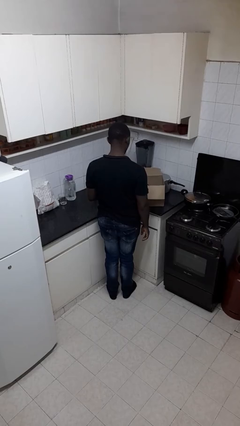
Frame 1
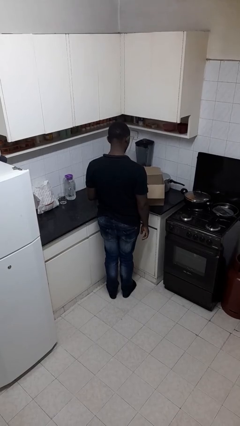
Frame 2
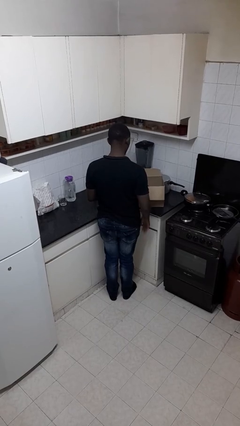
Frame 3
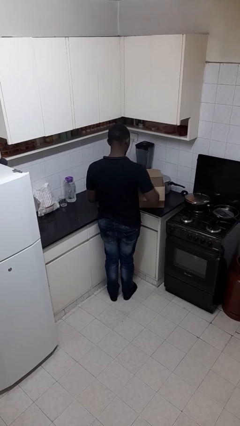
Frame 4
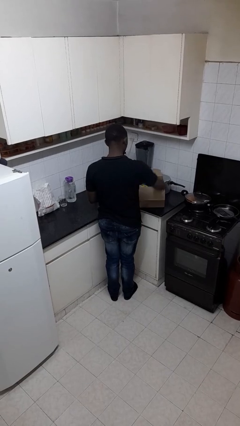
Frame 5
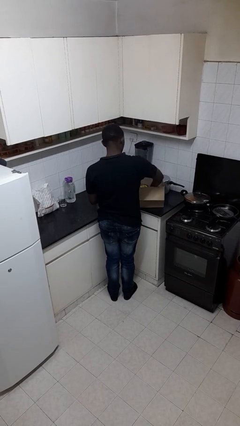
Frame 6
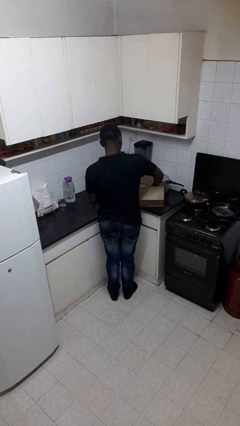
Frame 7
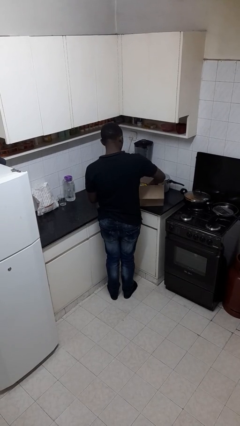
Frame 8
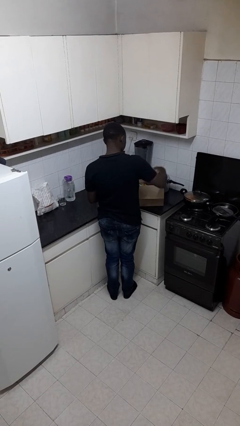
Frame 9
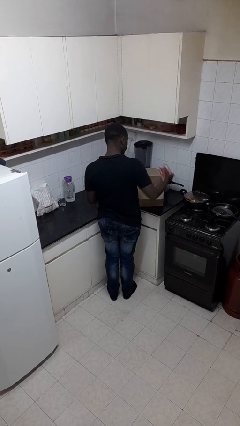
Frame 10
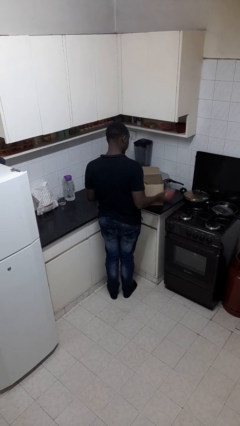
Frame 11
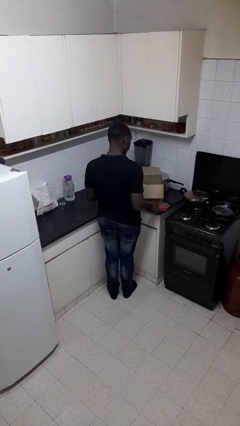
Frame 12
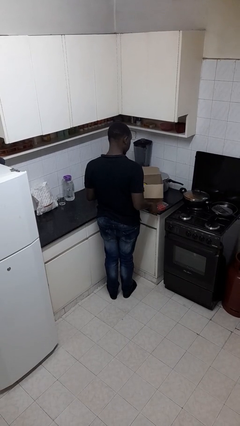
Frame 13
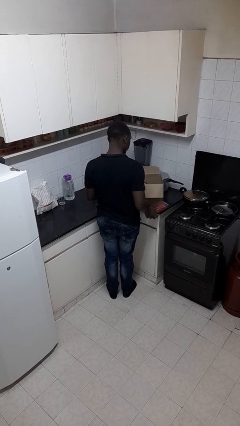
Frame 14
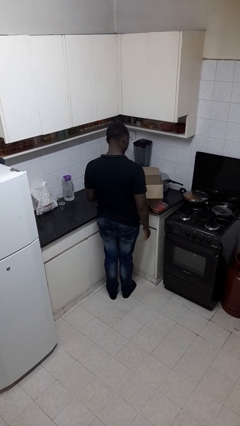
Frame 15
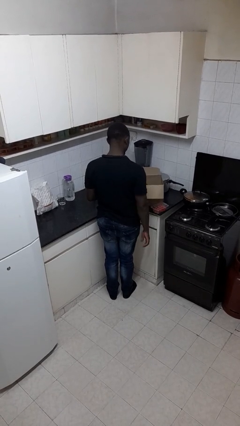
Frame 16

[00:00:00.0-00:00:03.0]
person takes object from box

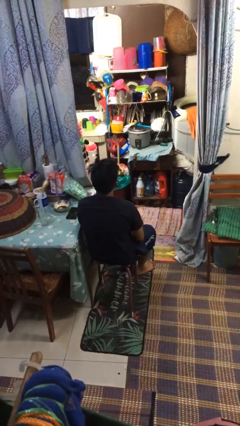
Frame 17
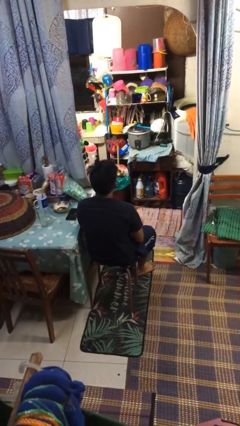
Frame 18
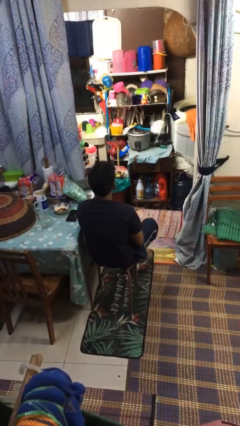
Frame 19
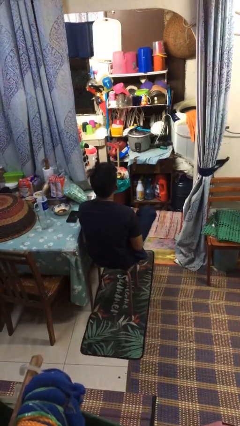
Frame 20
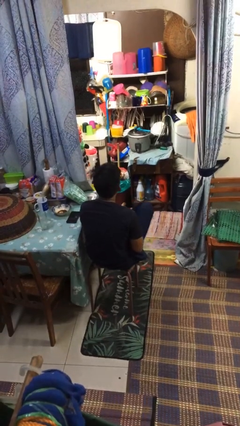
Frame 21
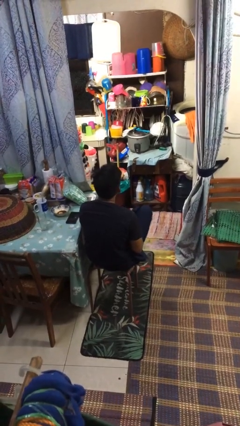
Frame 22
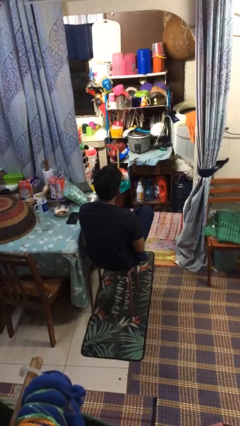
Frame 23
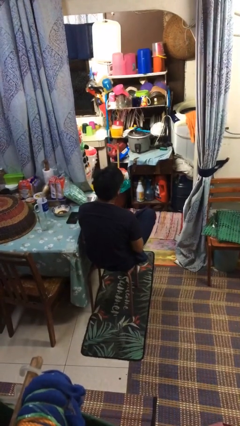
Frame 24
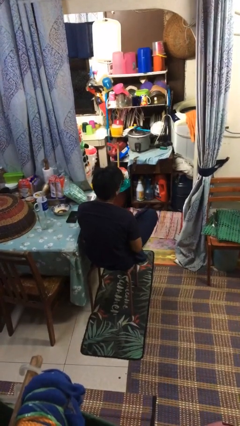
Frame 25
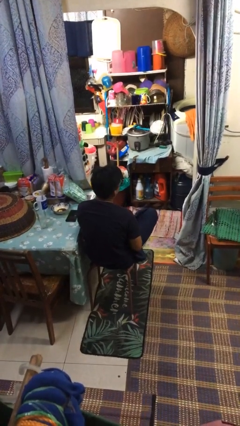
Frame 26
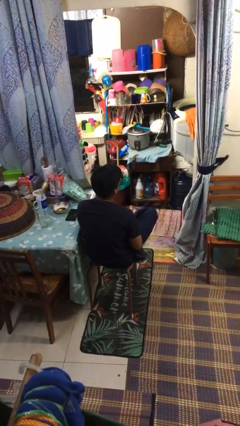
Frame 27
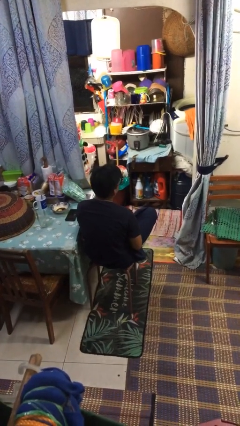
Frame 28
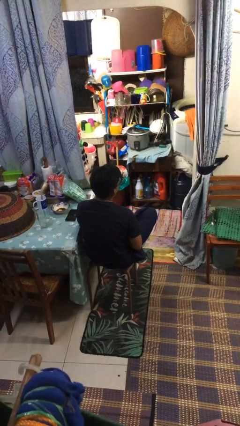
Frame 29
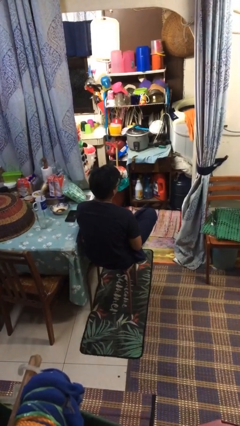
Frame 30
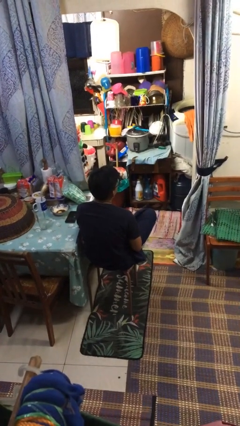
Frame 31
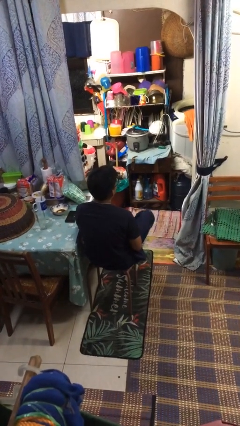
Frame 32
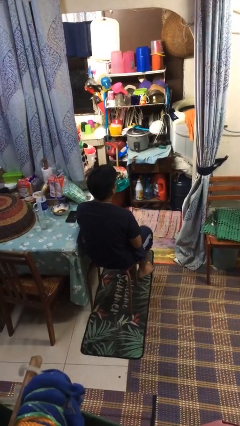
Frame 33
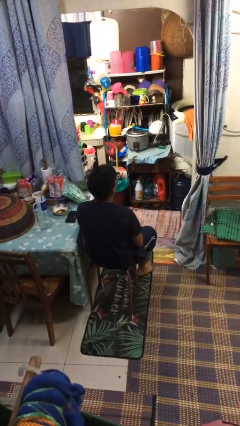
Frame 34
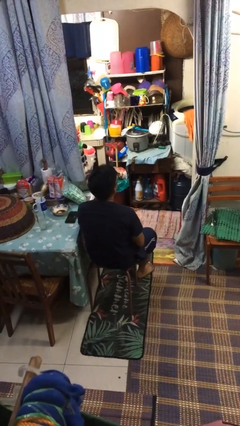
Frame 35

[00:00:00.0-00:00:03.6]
person crosses legs

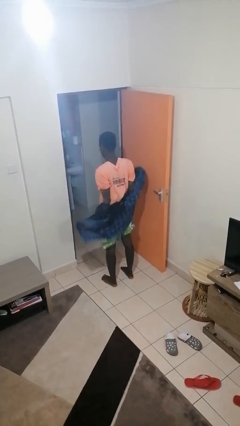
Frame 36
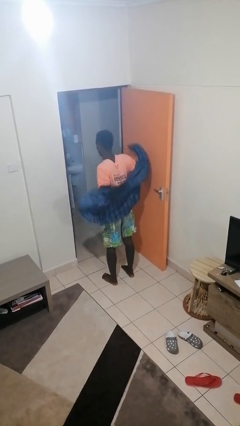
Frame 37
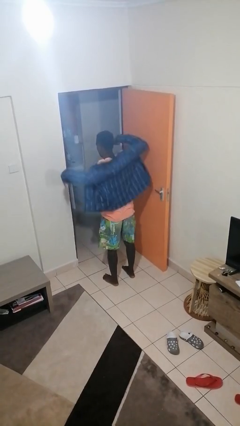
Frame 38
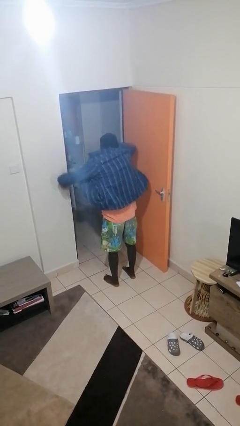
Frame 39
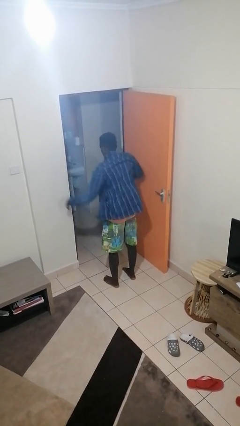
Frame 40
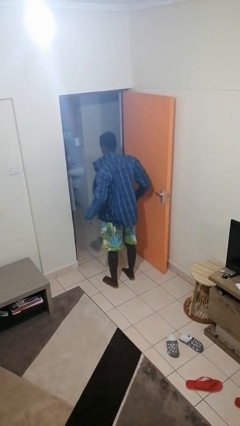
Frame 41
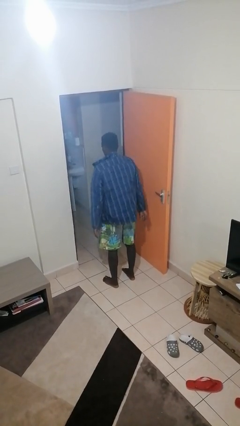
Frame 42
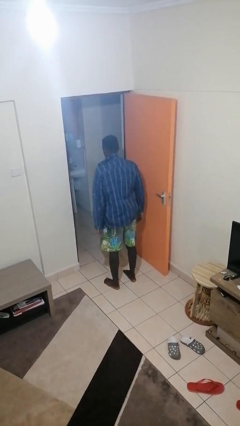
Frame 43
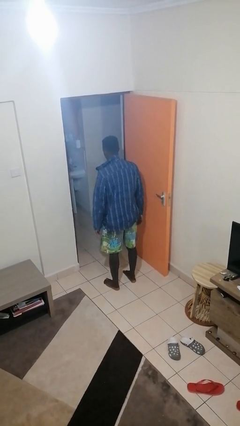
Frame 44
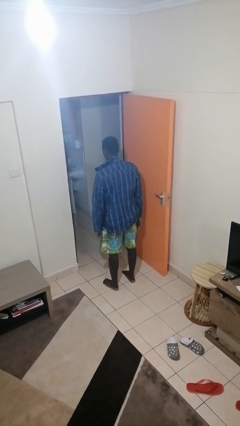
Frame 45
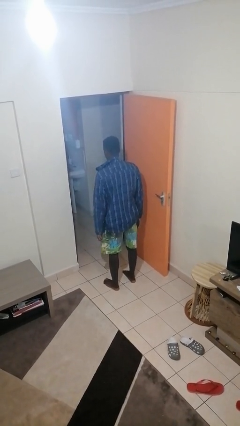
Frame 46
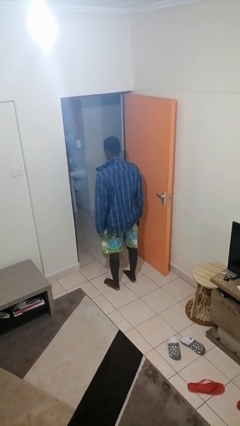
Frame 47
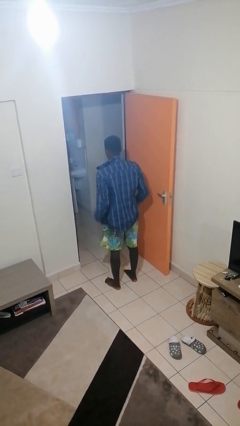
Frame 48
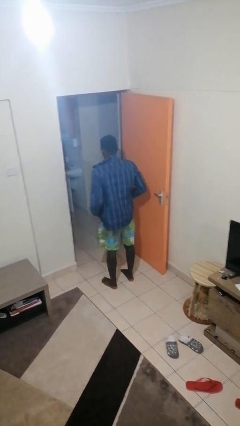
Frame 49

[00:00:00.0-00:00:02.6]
person puts on jacket

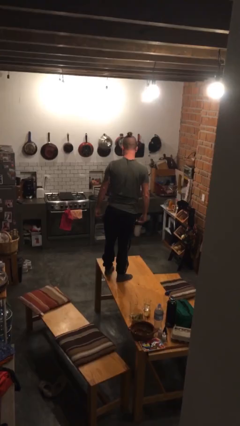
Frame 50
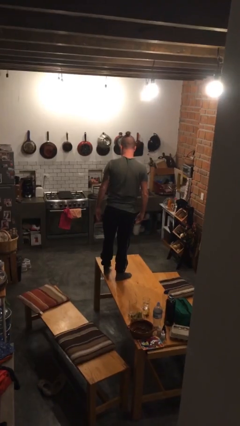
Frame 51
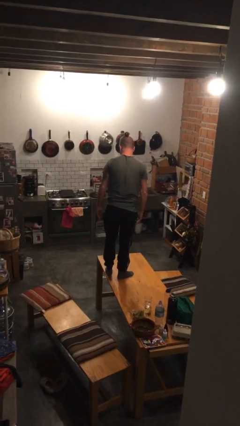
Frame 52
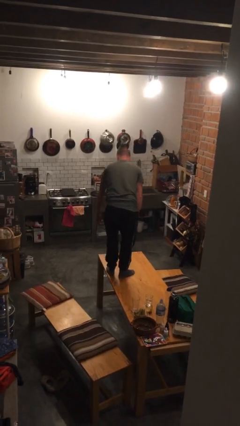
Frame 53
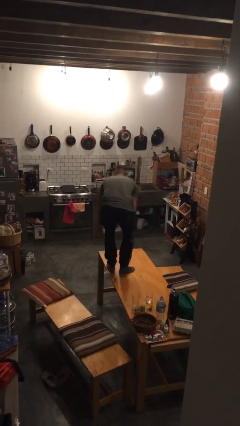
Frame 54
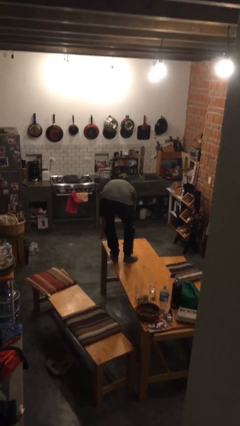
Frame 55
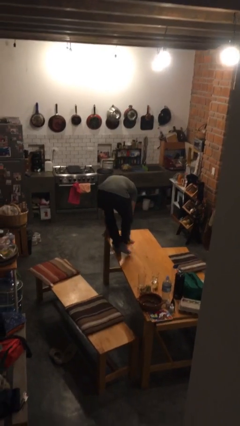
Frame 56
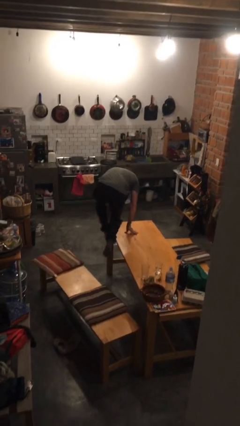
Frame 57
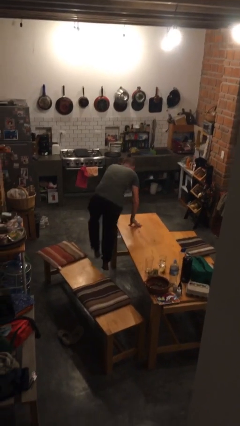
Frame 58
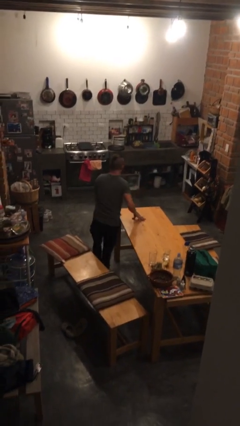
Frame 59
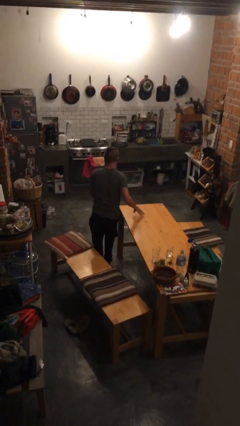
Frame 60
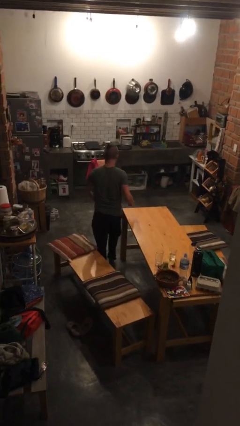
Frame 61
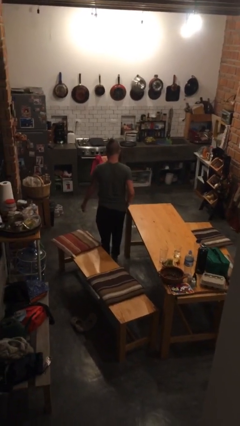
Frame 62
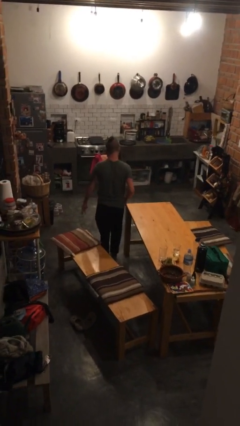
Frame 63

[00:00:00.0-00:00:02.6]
person climbs off table

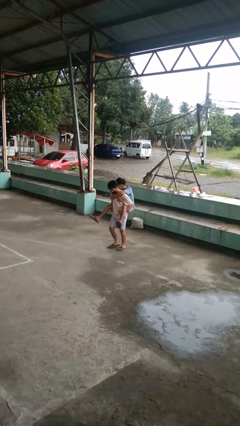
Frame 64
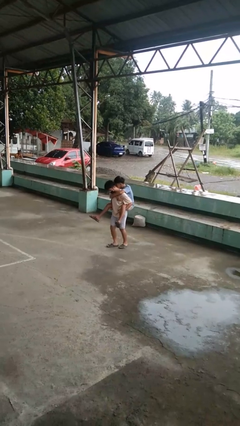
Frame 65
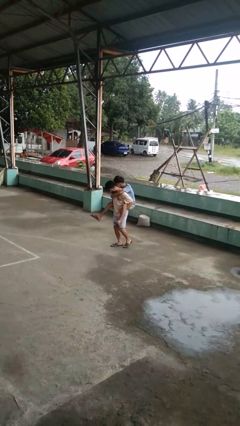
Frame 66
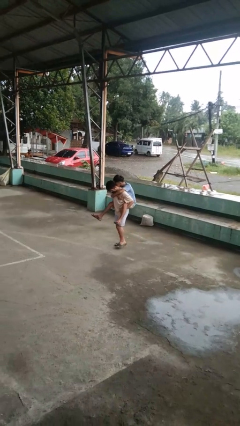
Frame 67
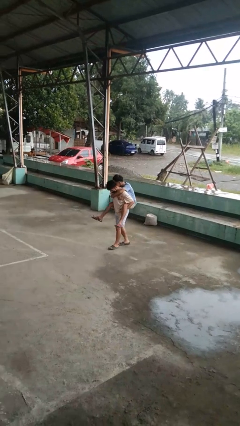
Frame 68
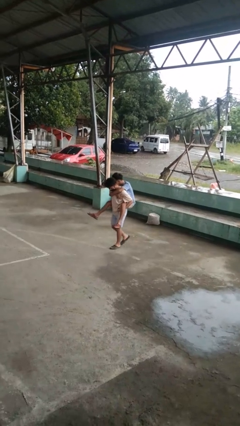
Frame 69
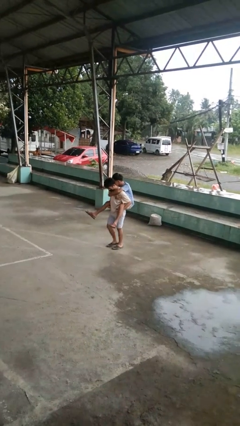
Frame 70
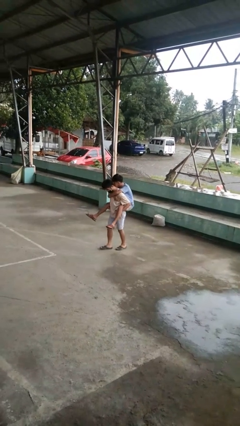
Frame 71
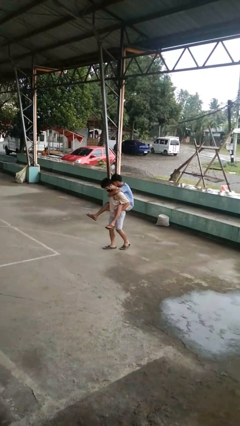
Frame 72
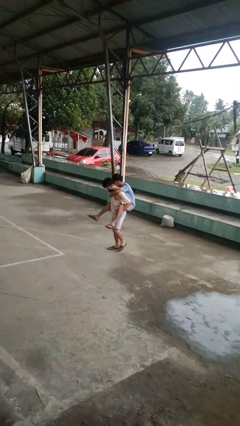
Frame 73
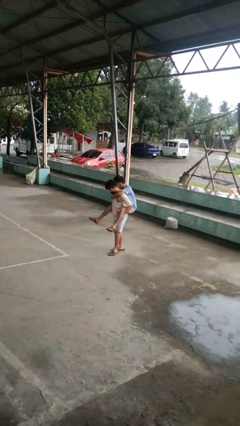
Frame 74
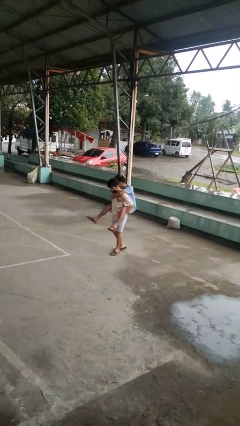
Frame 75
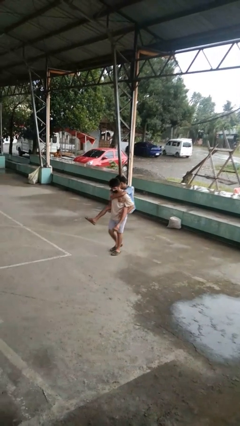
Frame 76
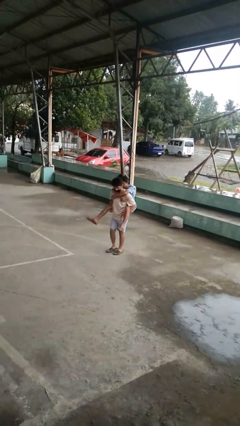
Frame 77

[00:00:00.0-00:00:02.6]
person carries person on back

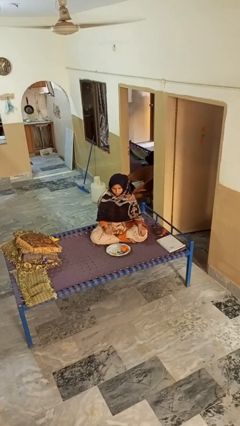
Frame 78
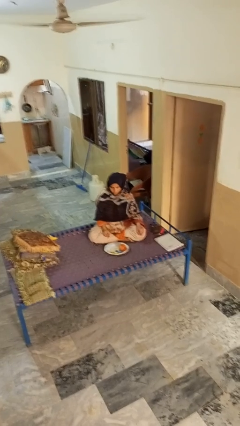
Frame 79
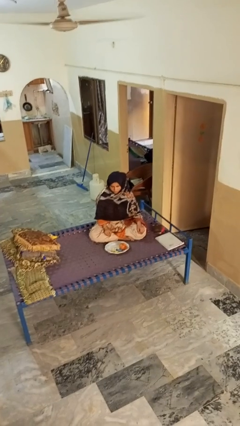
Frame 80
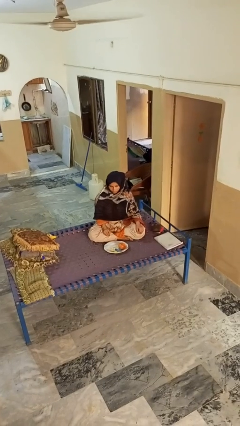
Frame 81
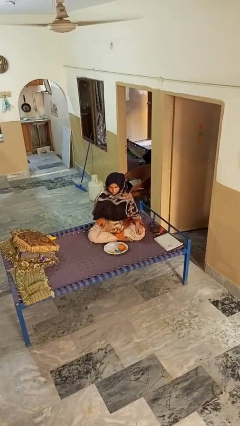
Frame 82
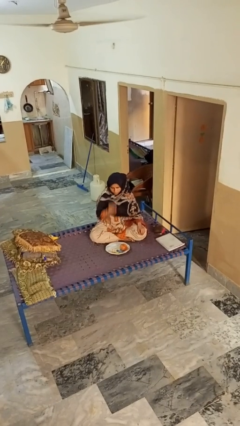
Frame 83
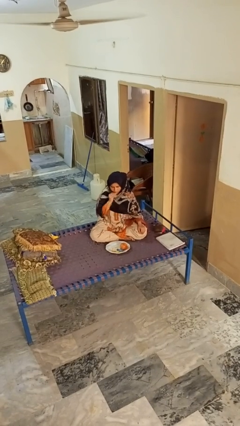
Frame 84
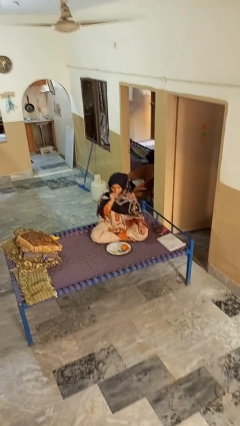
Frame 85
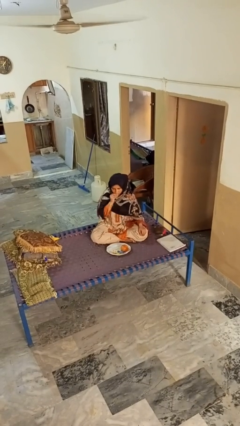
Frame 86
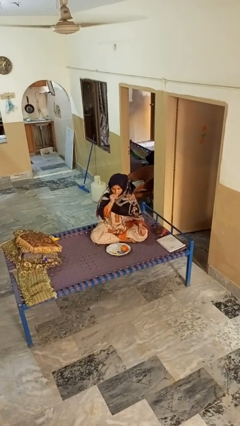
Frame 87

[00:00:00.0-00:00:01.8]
person eats apple

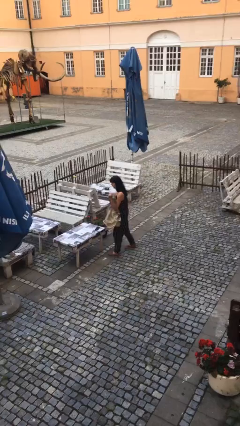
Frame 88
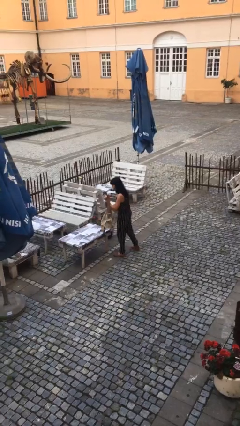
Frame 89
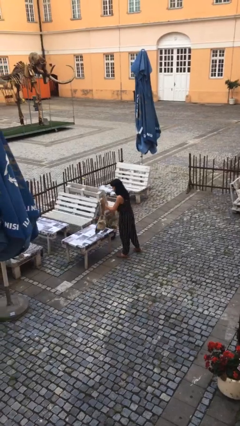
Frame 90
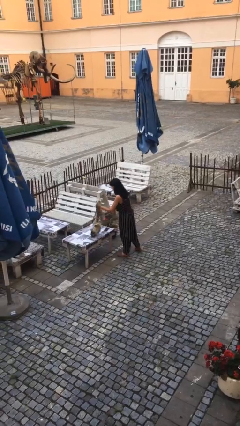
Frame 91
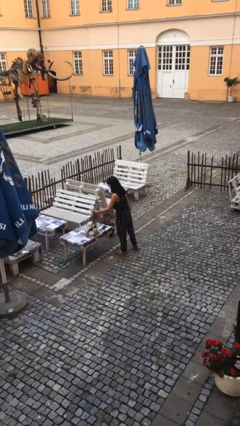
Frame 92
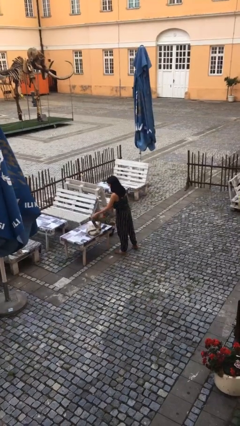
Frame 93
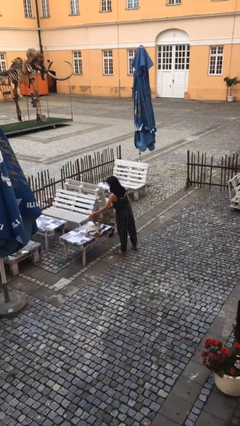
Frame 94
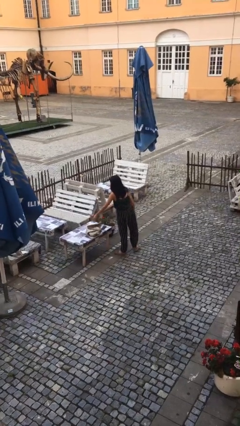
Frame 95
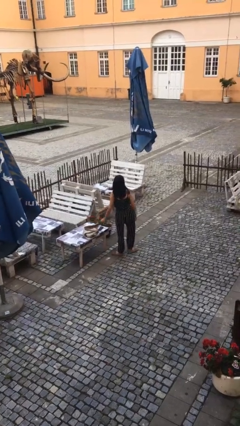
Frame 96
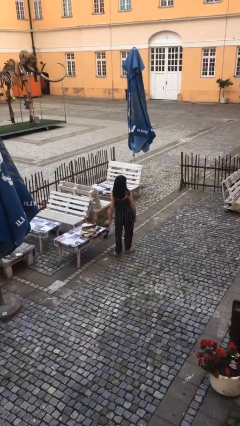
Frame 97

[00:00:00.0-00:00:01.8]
person puts down object on table
